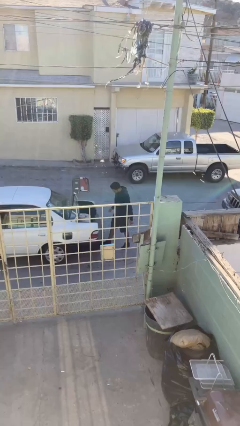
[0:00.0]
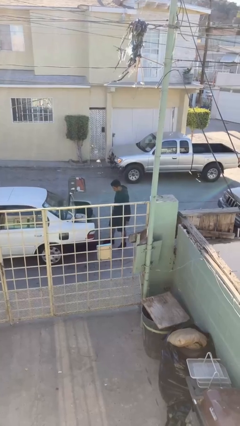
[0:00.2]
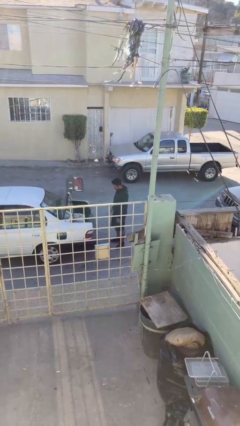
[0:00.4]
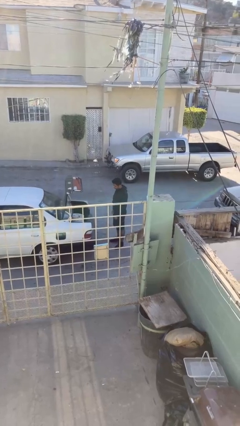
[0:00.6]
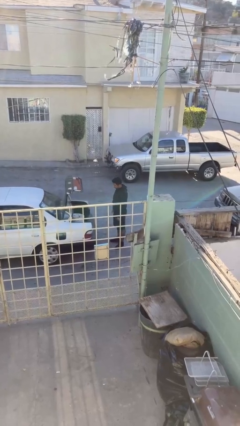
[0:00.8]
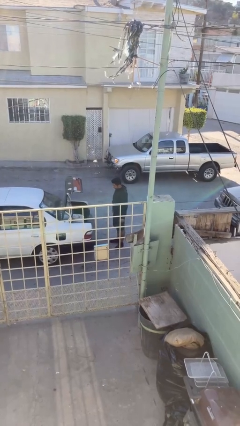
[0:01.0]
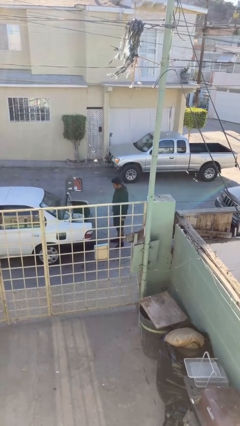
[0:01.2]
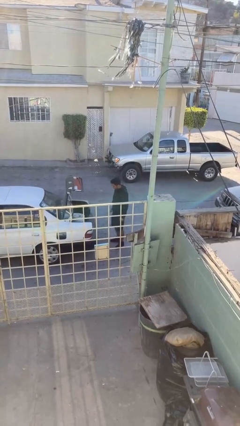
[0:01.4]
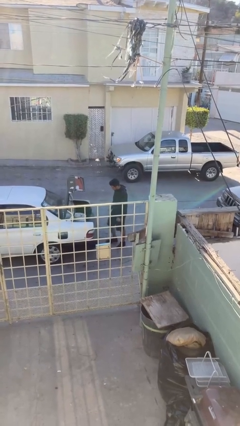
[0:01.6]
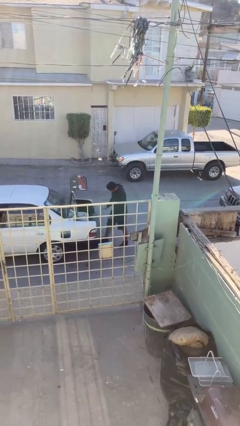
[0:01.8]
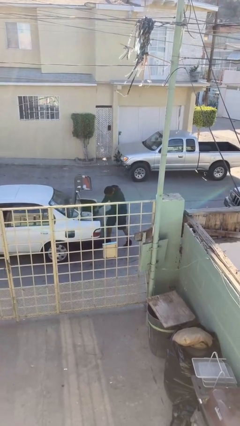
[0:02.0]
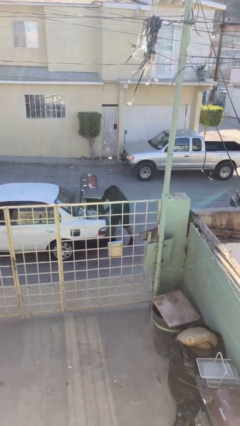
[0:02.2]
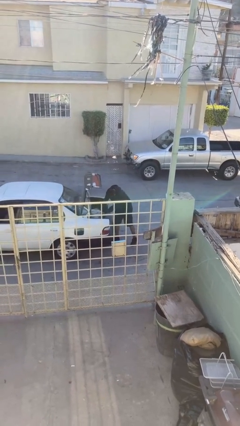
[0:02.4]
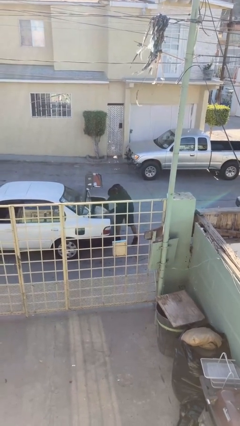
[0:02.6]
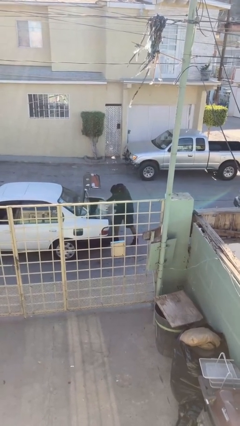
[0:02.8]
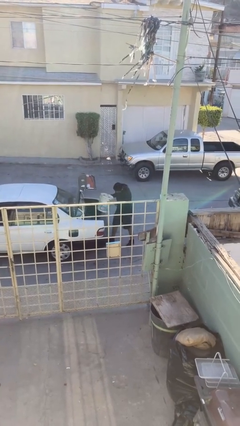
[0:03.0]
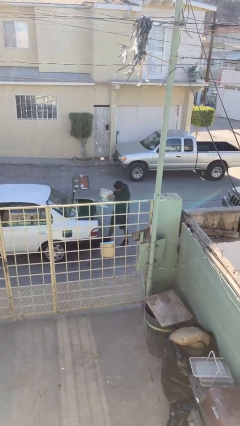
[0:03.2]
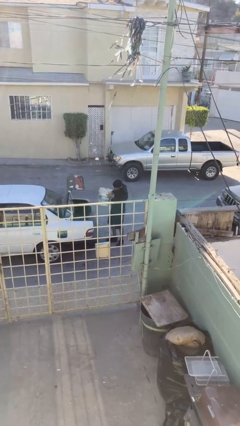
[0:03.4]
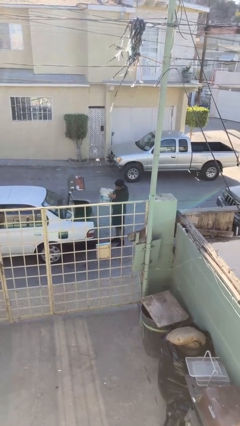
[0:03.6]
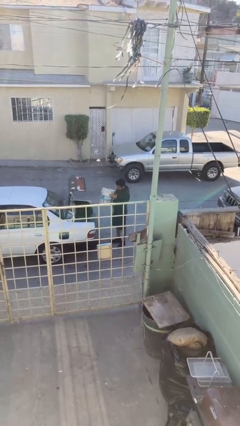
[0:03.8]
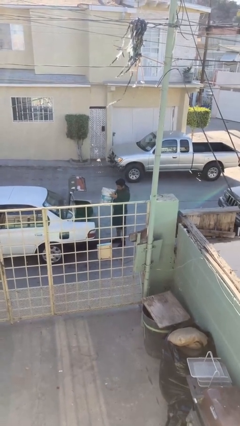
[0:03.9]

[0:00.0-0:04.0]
person unloads car

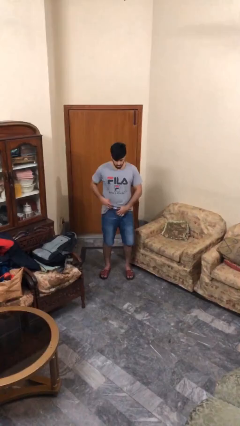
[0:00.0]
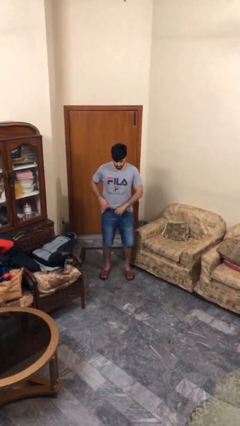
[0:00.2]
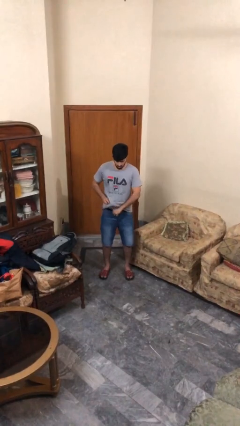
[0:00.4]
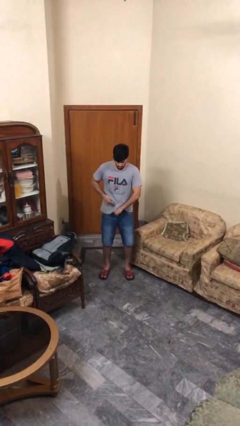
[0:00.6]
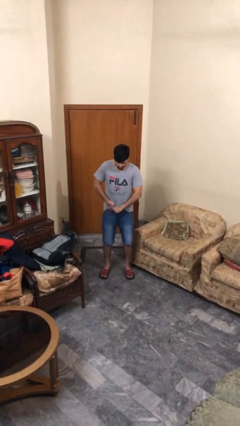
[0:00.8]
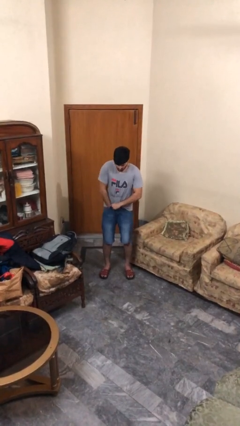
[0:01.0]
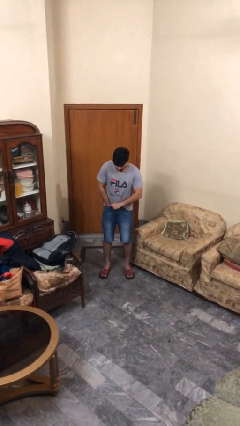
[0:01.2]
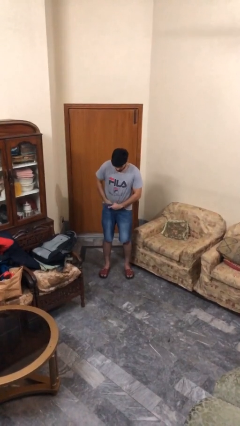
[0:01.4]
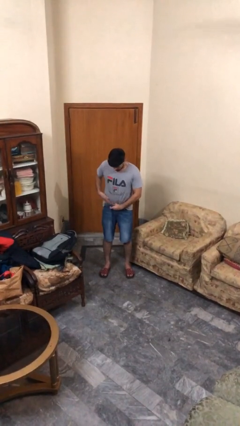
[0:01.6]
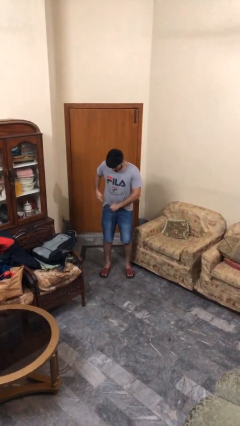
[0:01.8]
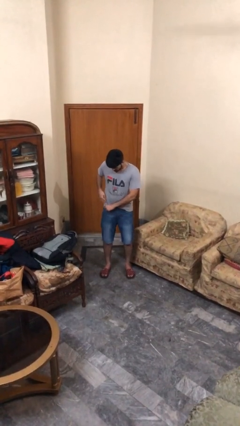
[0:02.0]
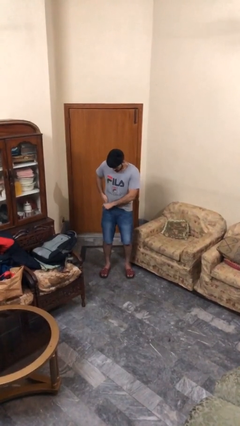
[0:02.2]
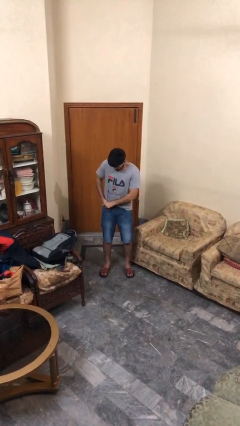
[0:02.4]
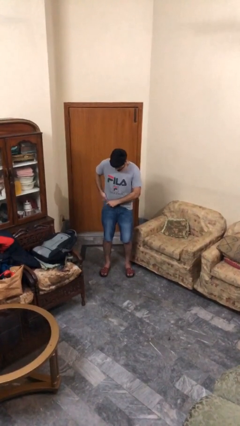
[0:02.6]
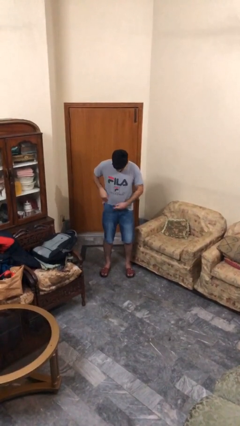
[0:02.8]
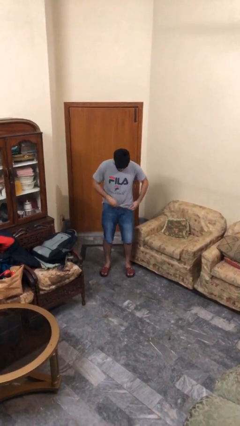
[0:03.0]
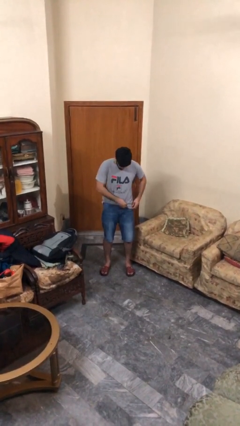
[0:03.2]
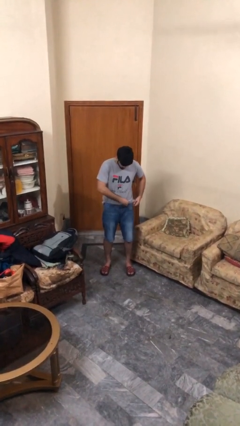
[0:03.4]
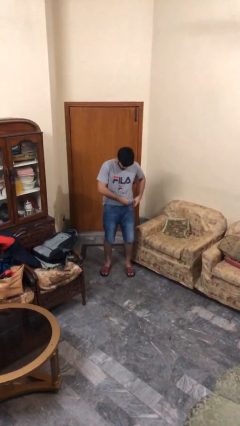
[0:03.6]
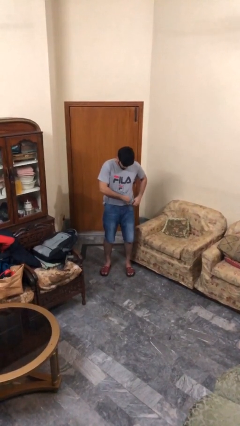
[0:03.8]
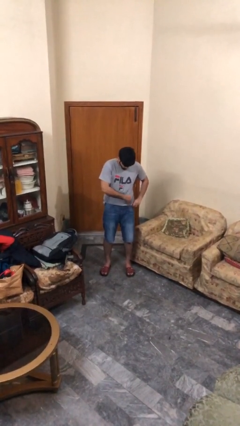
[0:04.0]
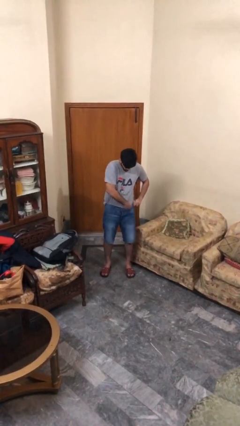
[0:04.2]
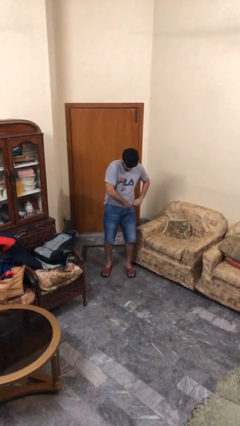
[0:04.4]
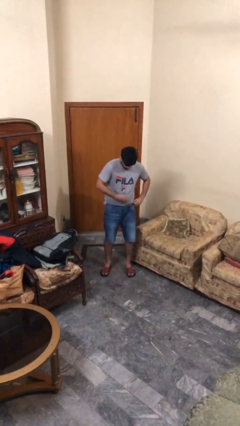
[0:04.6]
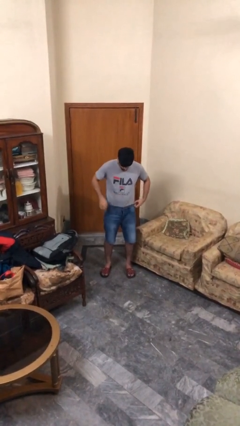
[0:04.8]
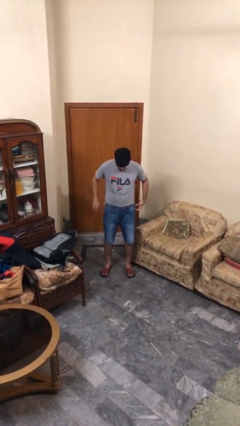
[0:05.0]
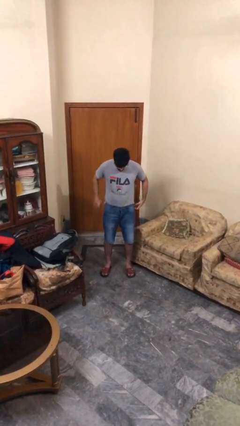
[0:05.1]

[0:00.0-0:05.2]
person tucks in shirt

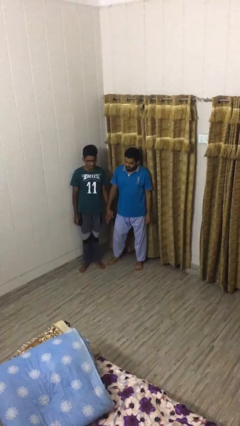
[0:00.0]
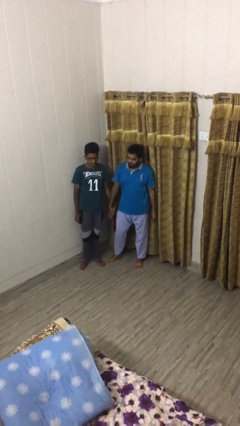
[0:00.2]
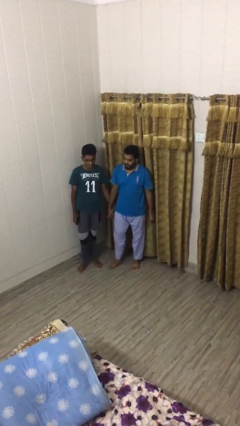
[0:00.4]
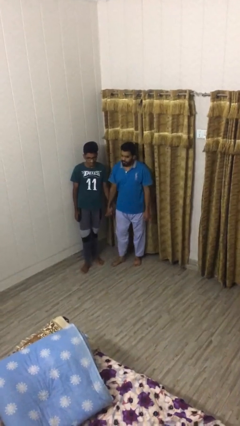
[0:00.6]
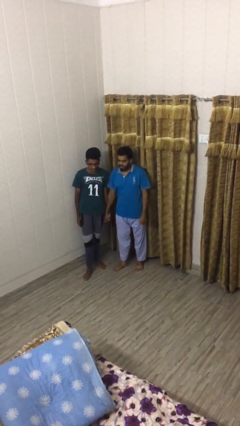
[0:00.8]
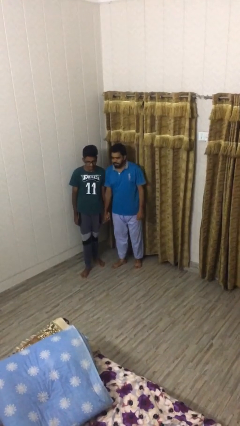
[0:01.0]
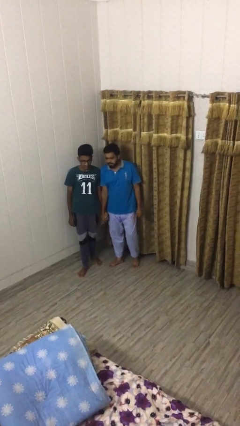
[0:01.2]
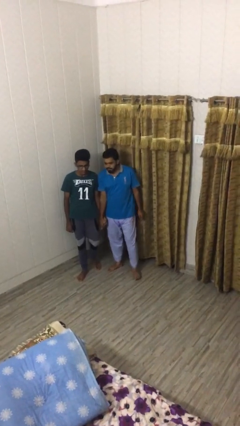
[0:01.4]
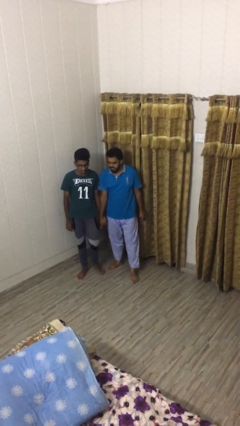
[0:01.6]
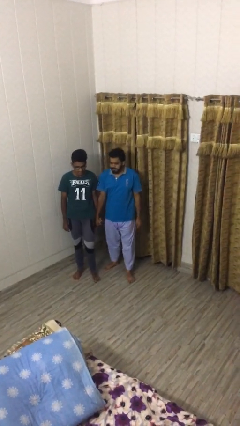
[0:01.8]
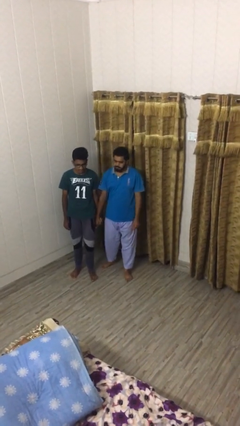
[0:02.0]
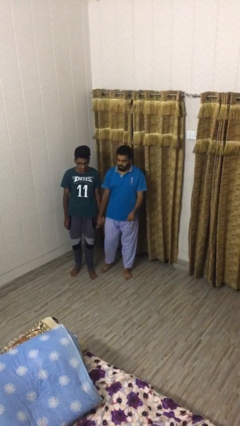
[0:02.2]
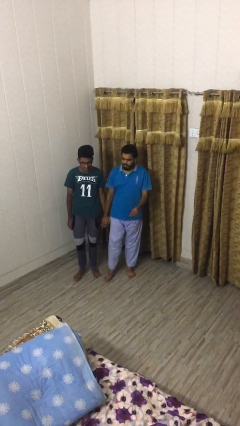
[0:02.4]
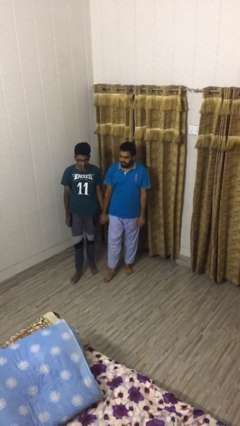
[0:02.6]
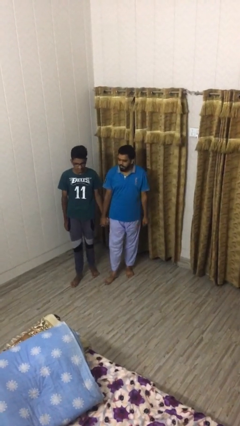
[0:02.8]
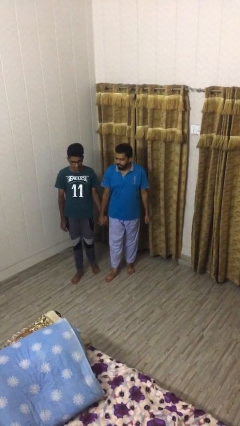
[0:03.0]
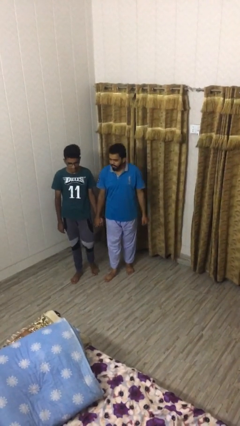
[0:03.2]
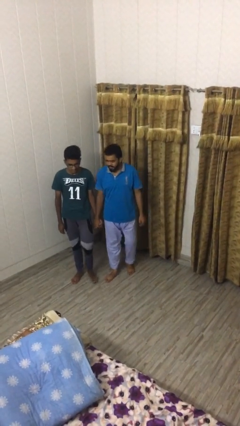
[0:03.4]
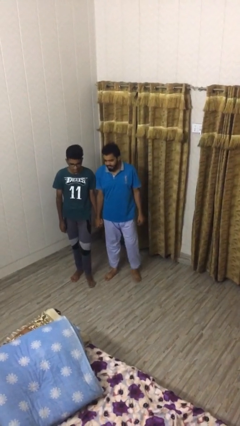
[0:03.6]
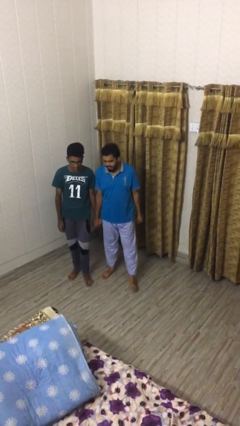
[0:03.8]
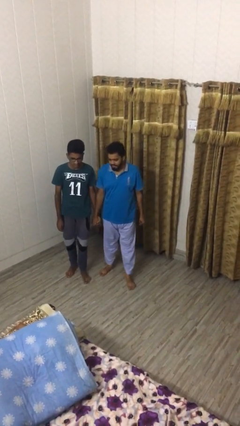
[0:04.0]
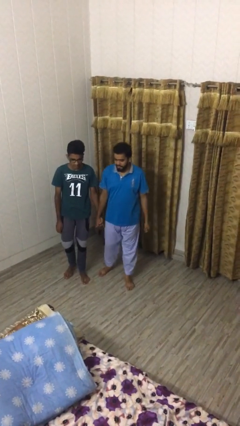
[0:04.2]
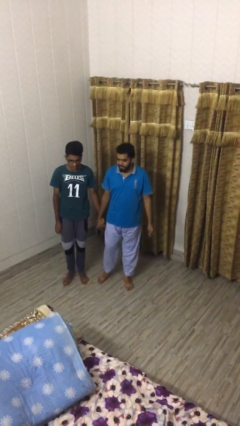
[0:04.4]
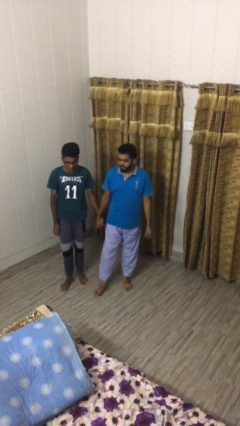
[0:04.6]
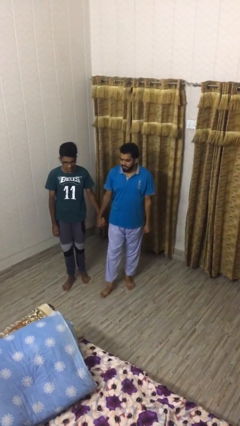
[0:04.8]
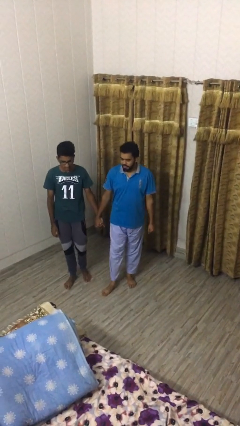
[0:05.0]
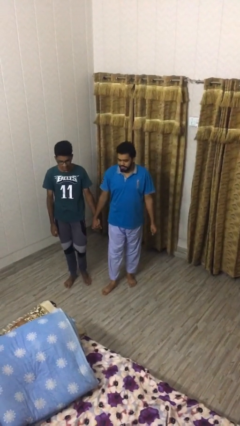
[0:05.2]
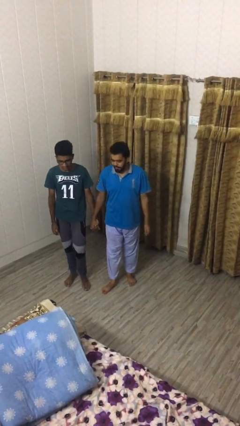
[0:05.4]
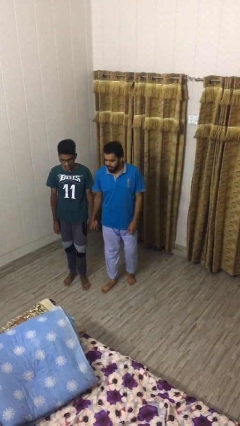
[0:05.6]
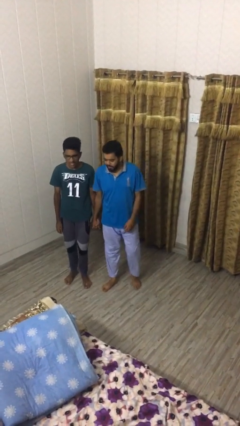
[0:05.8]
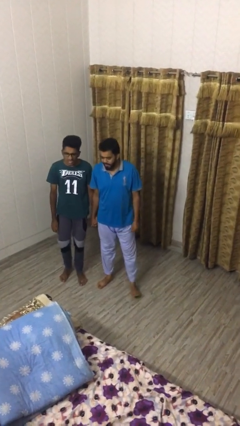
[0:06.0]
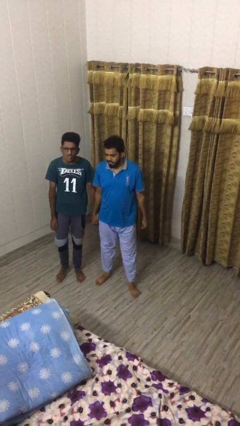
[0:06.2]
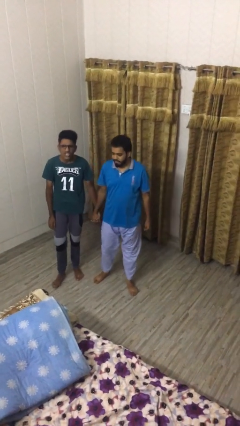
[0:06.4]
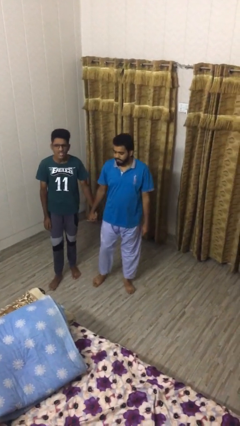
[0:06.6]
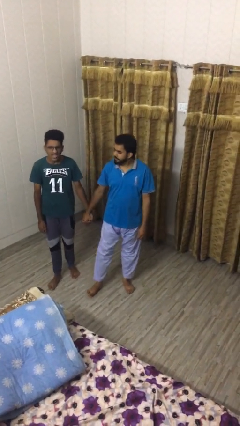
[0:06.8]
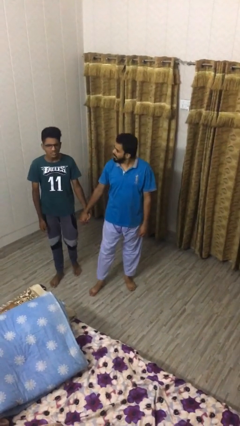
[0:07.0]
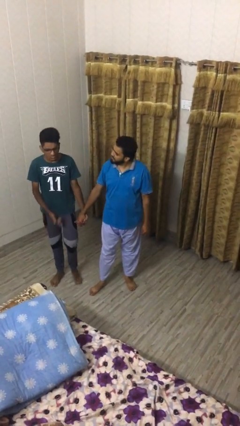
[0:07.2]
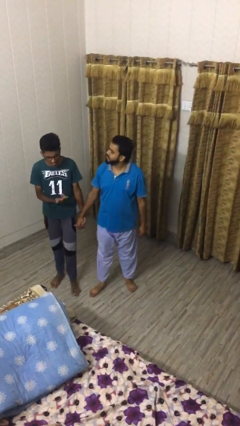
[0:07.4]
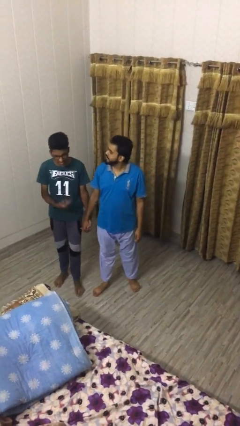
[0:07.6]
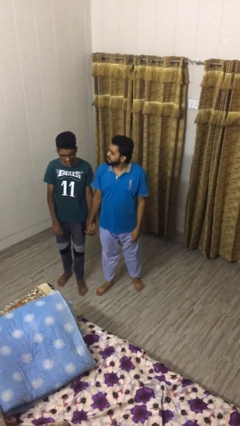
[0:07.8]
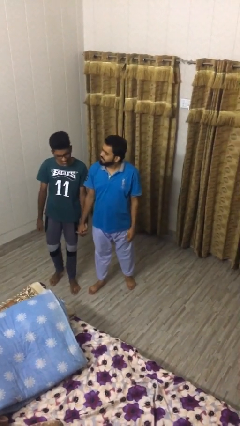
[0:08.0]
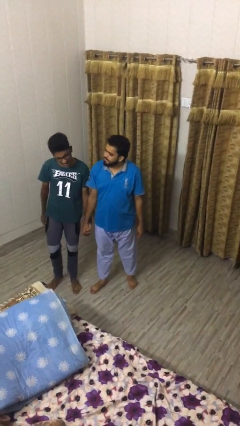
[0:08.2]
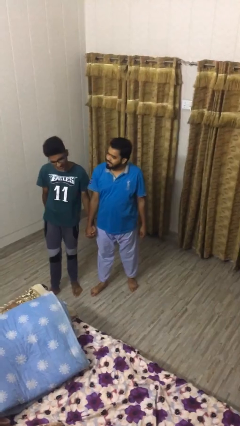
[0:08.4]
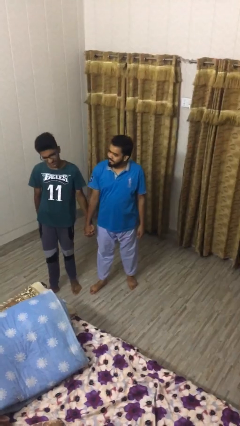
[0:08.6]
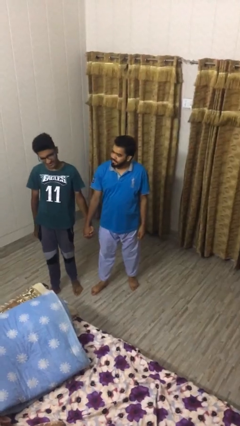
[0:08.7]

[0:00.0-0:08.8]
person holds hand

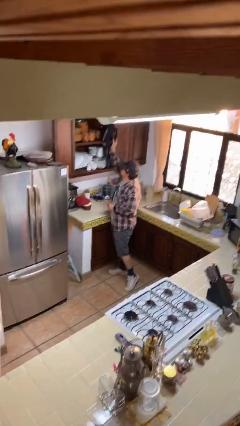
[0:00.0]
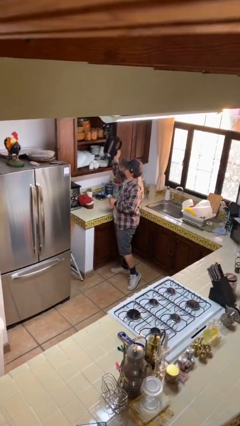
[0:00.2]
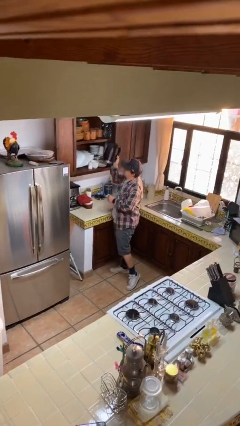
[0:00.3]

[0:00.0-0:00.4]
person picks up object from shelf
